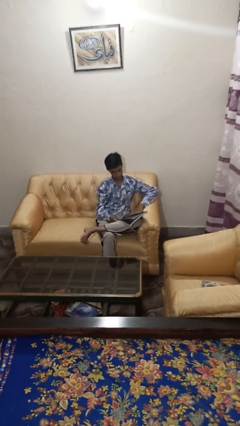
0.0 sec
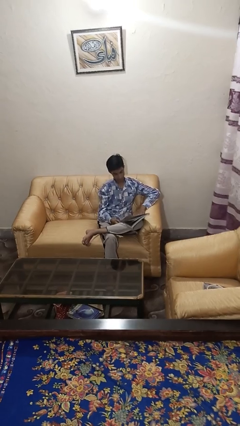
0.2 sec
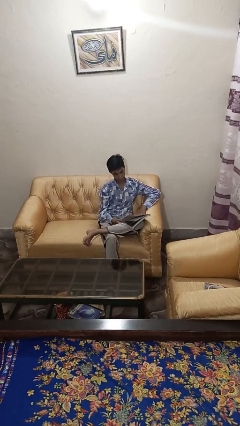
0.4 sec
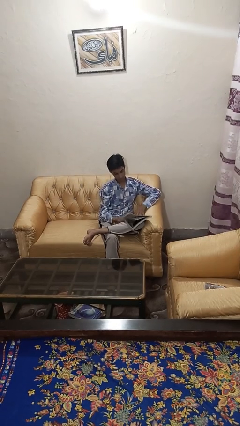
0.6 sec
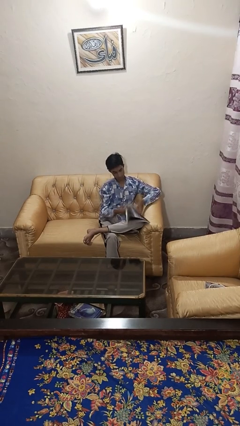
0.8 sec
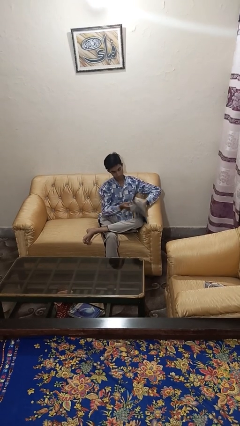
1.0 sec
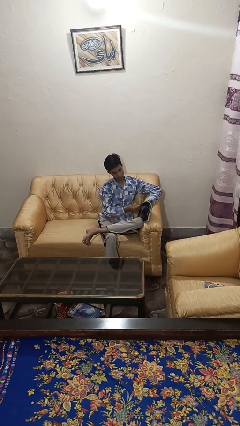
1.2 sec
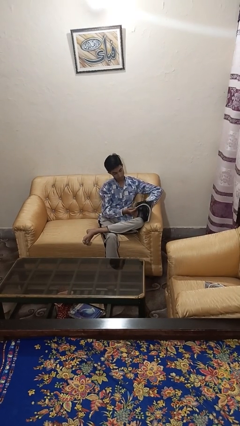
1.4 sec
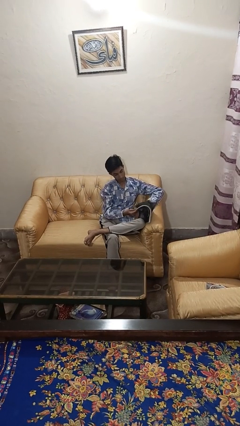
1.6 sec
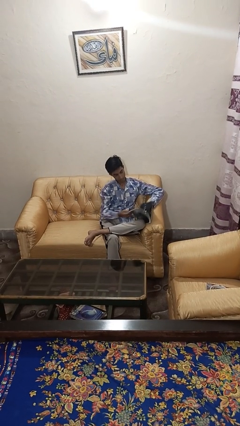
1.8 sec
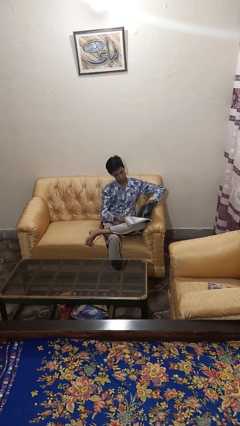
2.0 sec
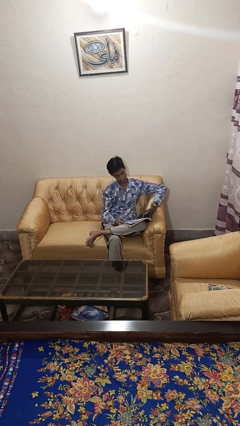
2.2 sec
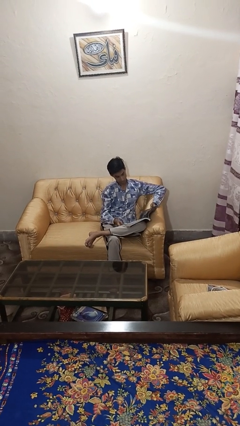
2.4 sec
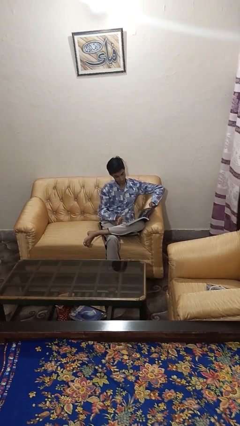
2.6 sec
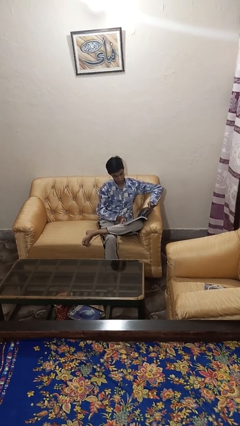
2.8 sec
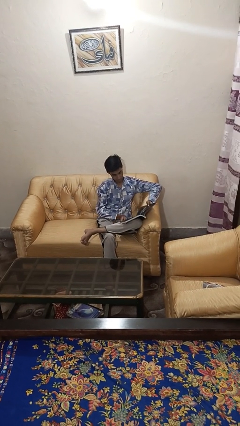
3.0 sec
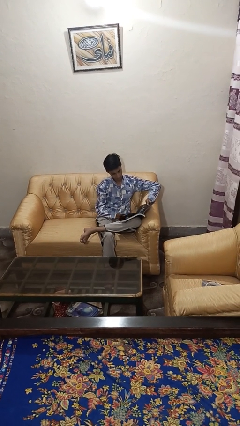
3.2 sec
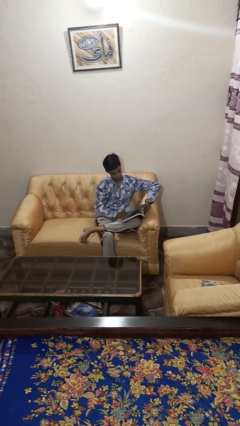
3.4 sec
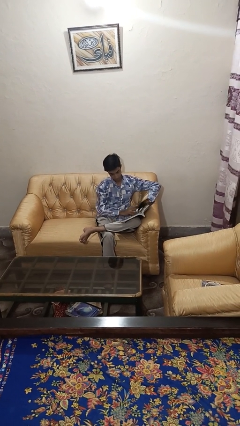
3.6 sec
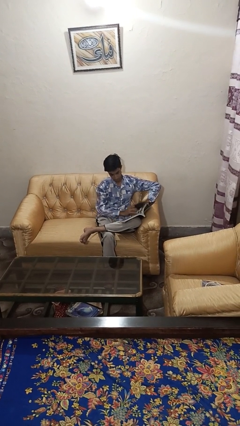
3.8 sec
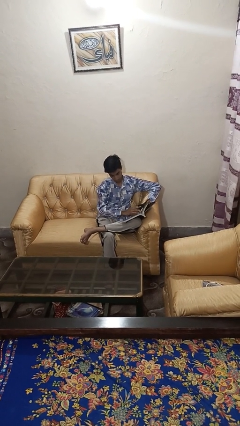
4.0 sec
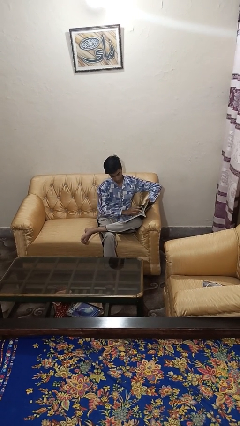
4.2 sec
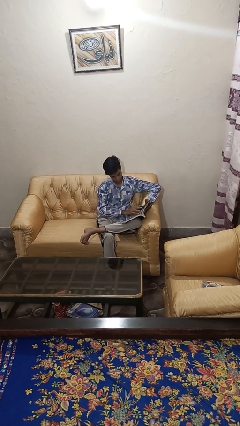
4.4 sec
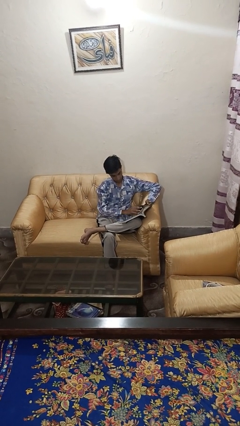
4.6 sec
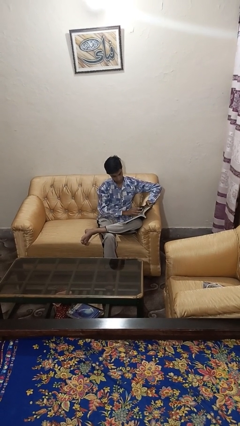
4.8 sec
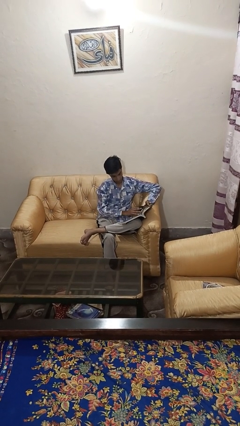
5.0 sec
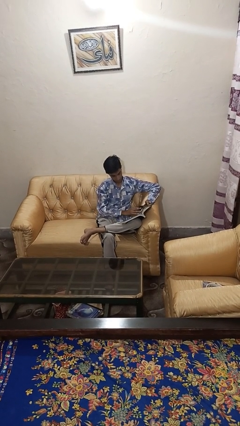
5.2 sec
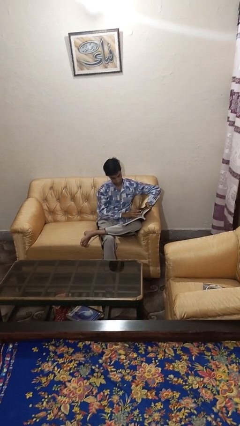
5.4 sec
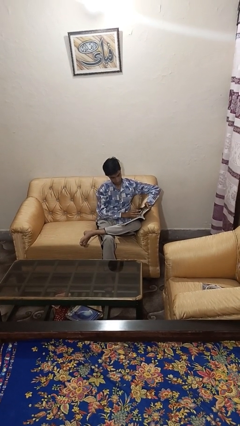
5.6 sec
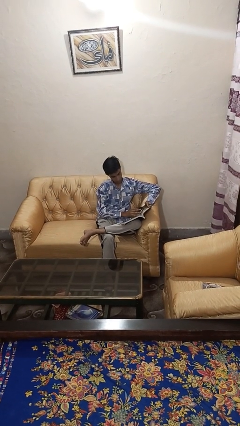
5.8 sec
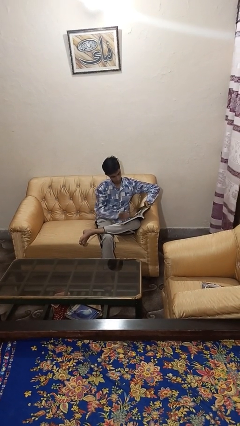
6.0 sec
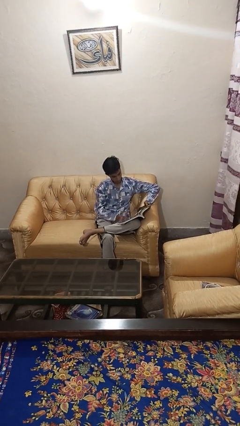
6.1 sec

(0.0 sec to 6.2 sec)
person reads magazine

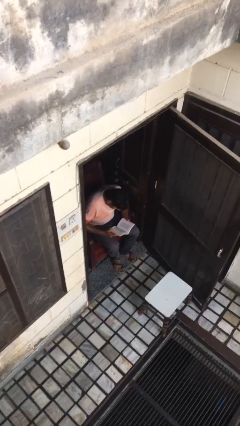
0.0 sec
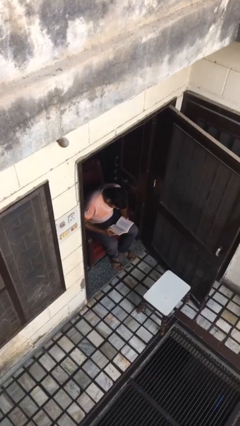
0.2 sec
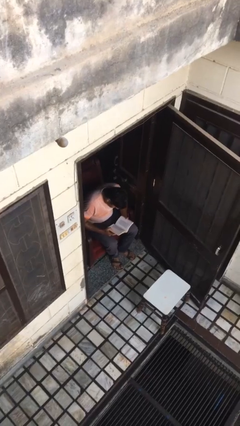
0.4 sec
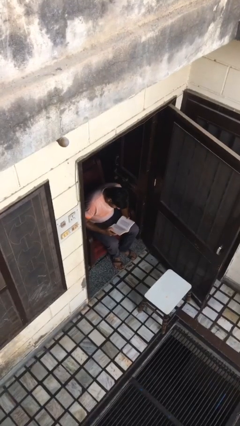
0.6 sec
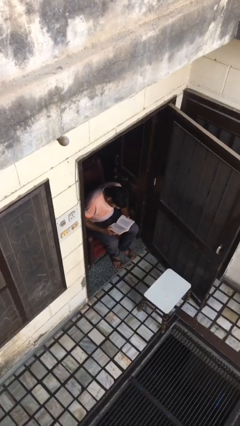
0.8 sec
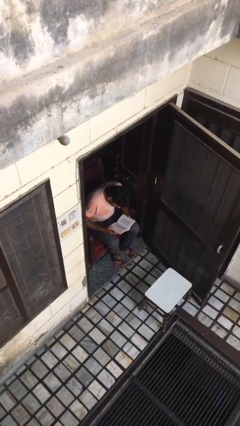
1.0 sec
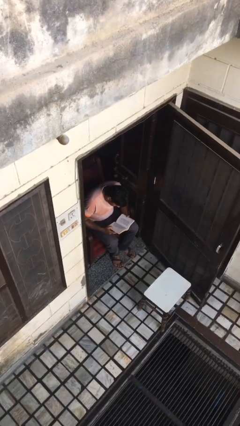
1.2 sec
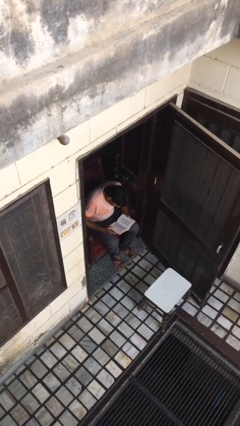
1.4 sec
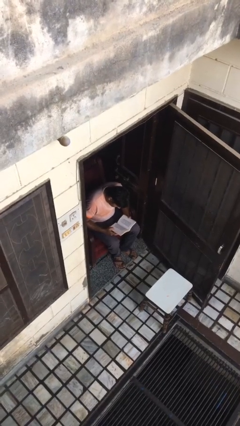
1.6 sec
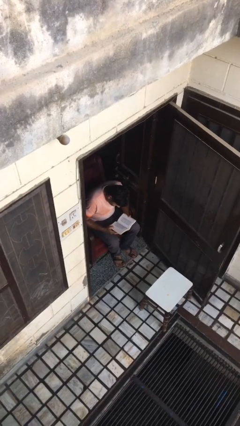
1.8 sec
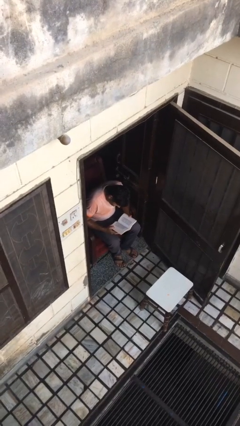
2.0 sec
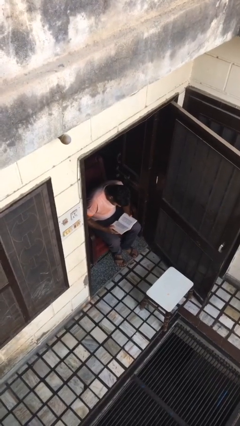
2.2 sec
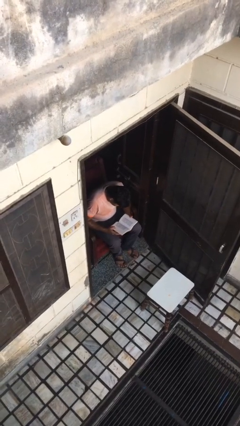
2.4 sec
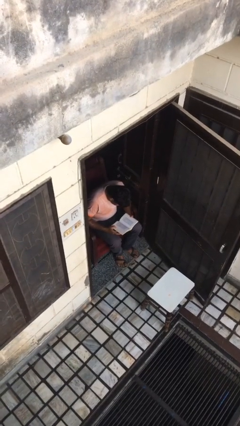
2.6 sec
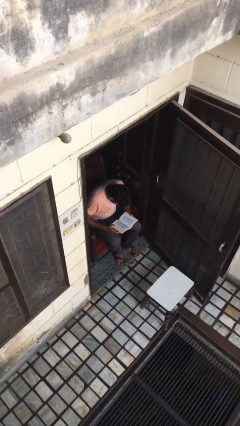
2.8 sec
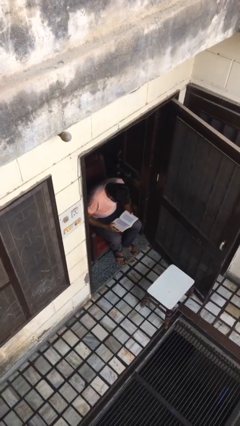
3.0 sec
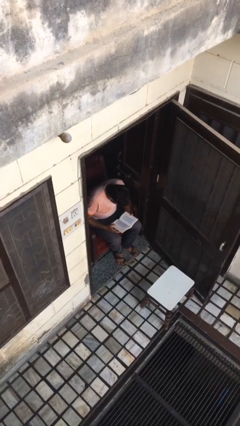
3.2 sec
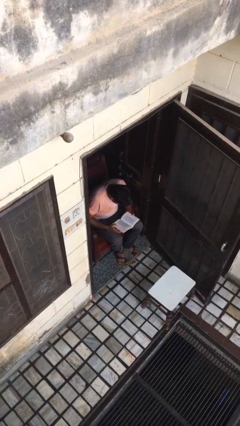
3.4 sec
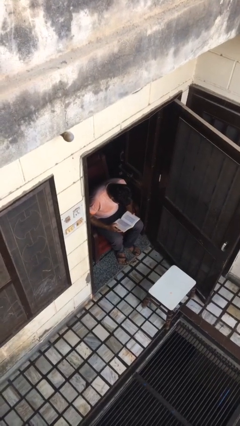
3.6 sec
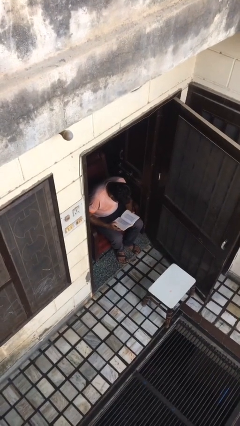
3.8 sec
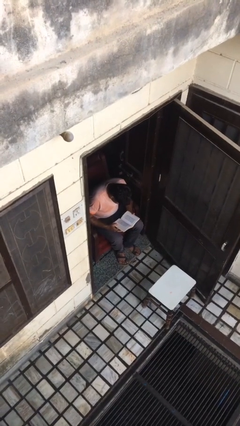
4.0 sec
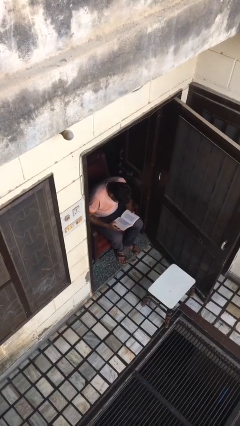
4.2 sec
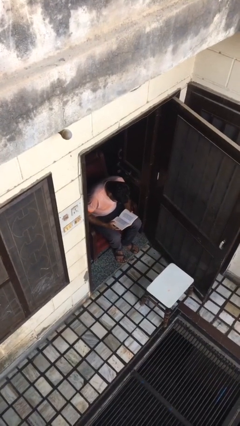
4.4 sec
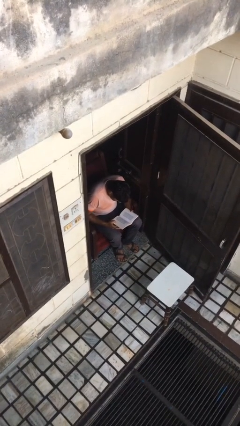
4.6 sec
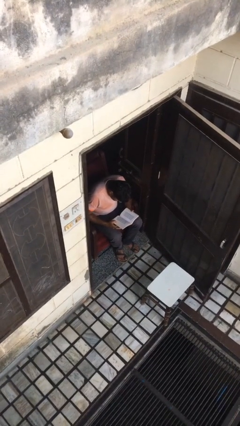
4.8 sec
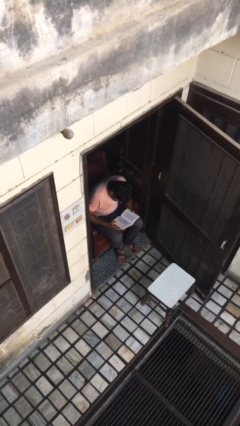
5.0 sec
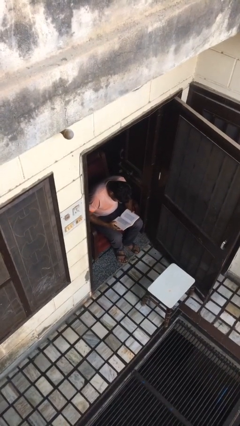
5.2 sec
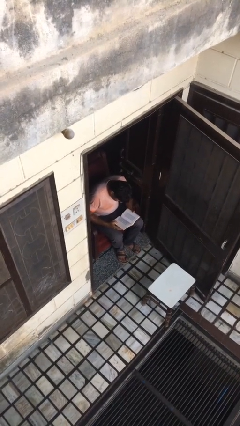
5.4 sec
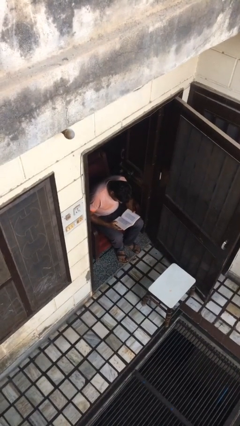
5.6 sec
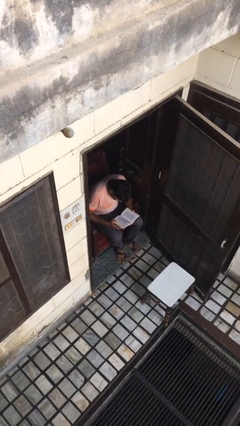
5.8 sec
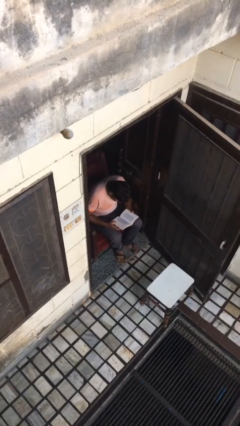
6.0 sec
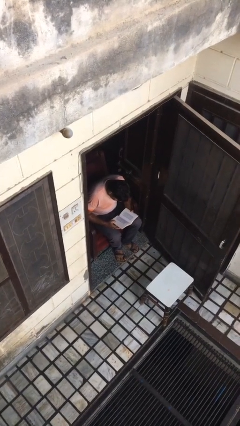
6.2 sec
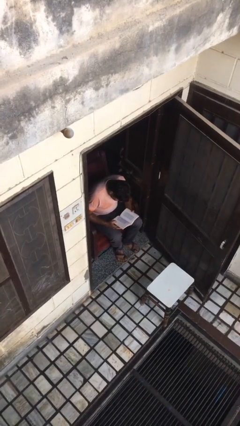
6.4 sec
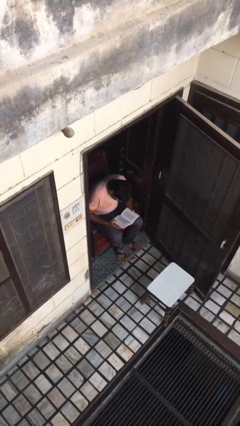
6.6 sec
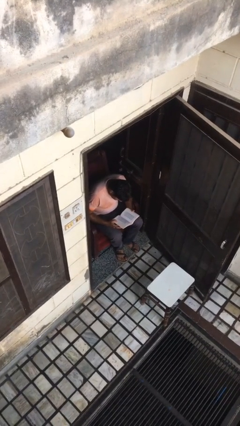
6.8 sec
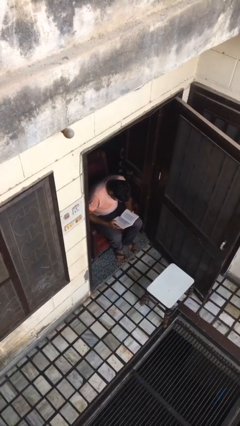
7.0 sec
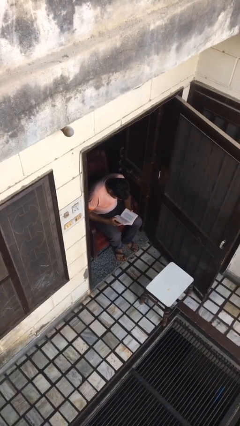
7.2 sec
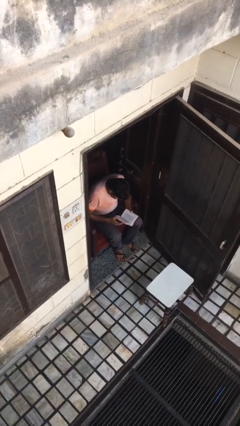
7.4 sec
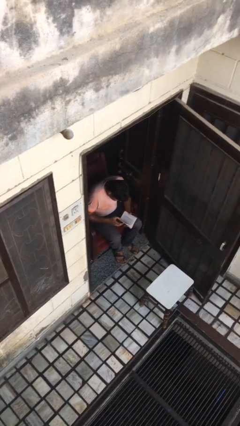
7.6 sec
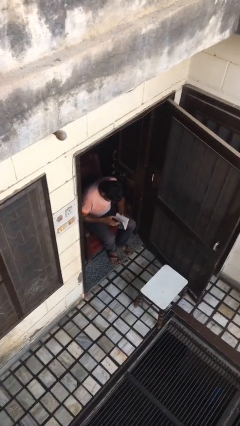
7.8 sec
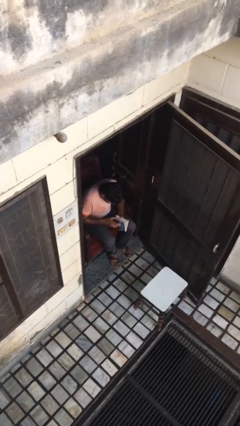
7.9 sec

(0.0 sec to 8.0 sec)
person reads document

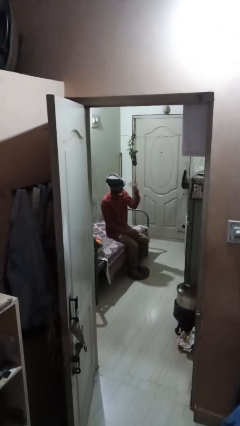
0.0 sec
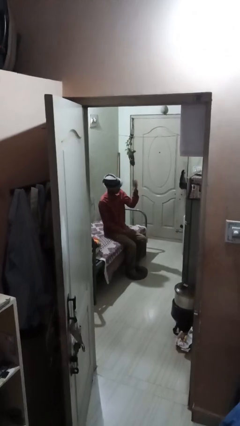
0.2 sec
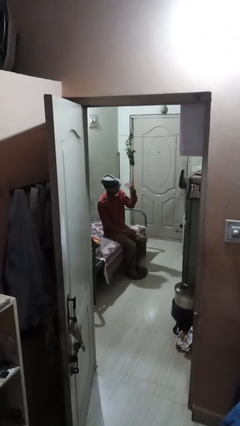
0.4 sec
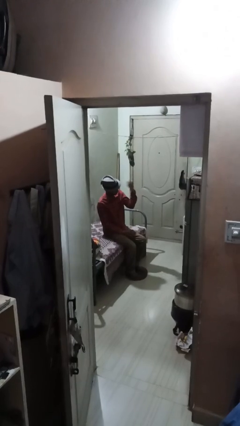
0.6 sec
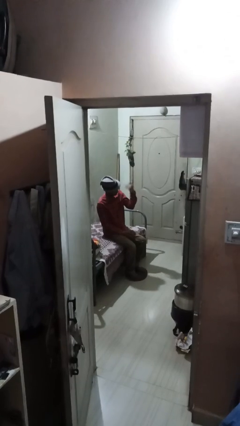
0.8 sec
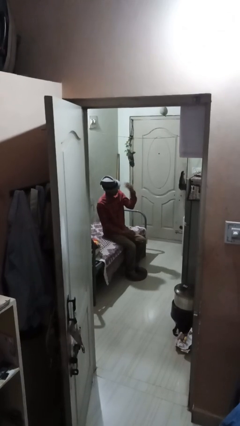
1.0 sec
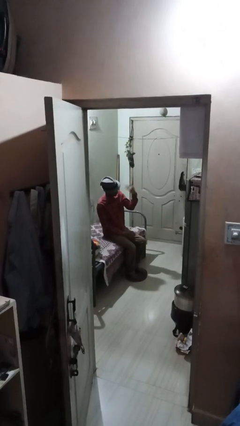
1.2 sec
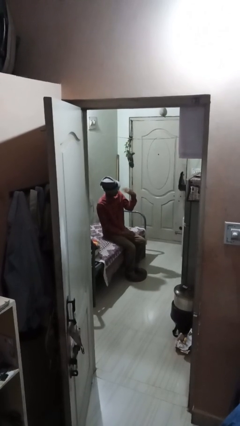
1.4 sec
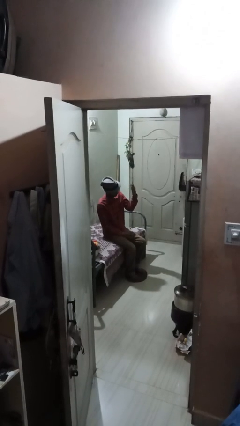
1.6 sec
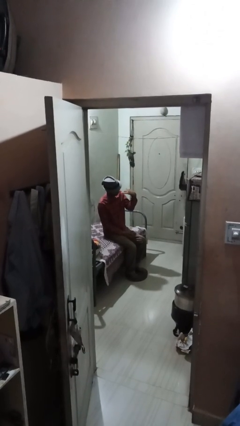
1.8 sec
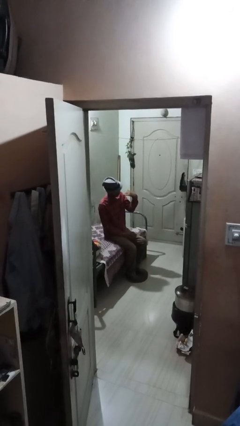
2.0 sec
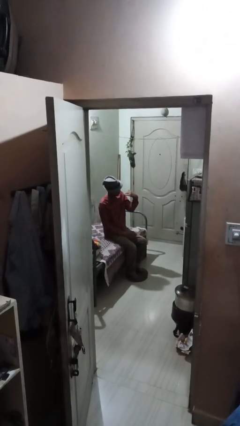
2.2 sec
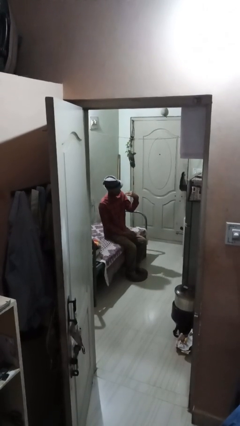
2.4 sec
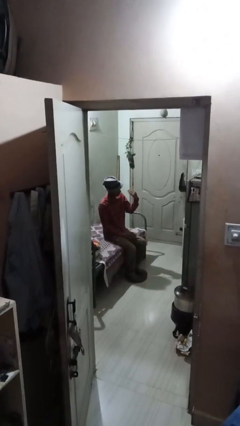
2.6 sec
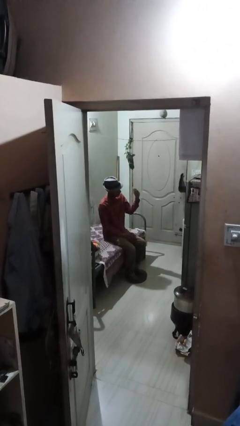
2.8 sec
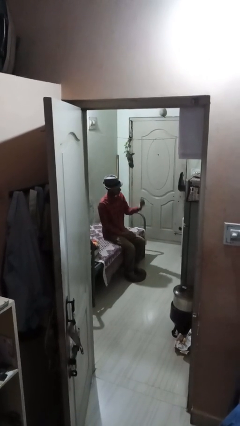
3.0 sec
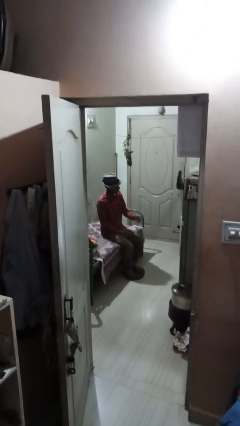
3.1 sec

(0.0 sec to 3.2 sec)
person gestures come here

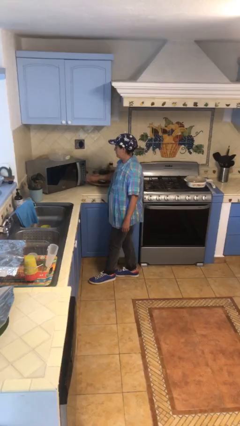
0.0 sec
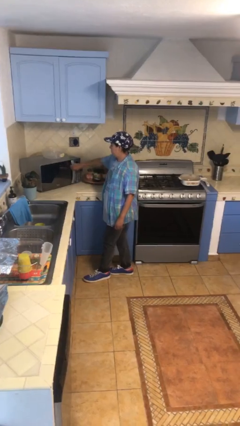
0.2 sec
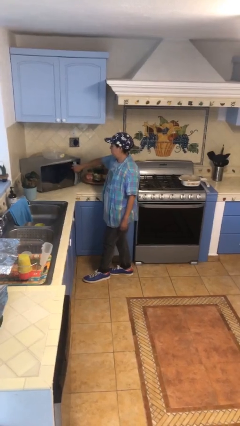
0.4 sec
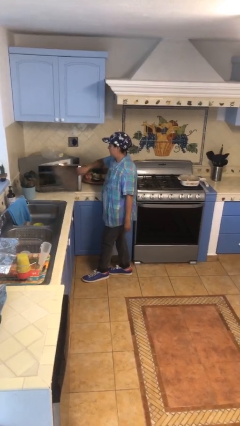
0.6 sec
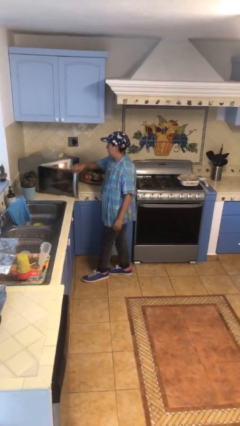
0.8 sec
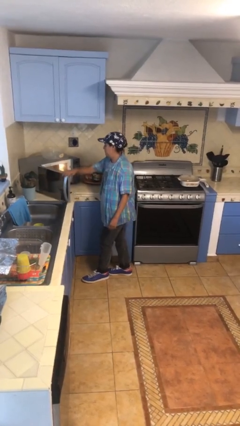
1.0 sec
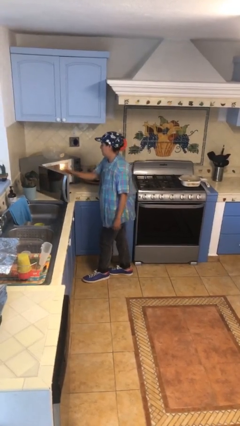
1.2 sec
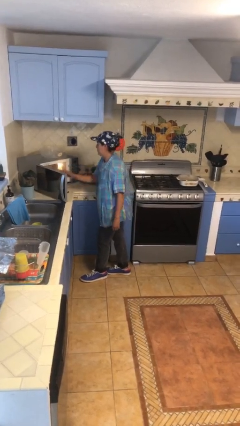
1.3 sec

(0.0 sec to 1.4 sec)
person opens microwave
